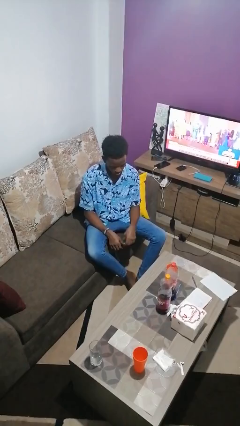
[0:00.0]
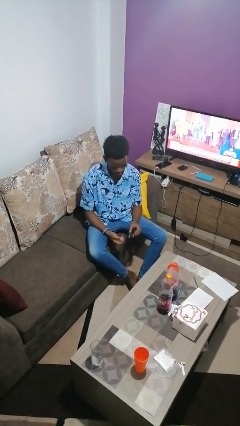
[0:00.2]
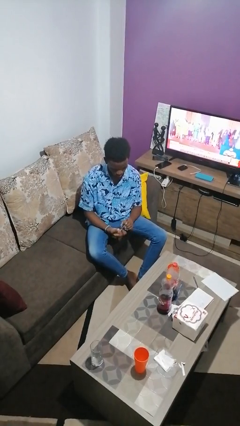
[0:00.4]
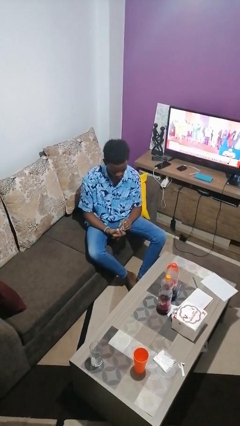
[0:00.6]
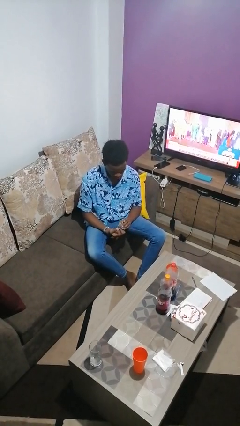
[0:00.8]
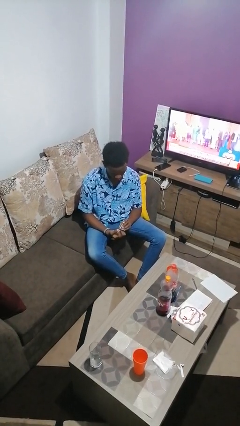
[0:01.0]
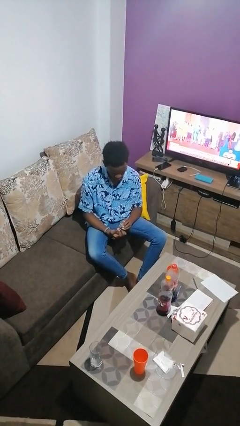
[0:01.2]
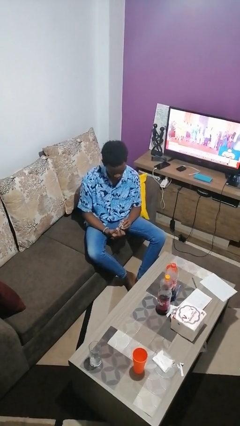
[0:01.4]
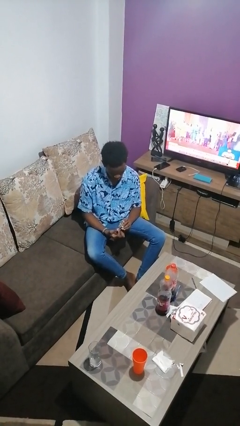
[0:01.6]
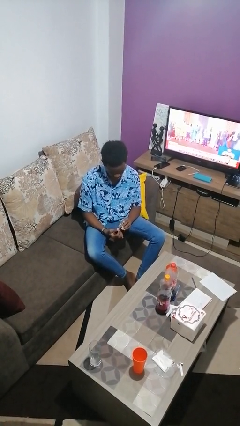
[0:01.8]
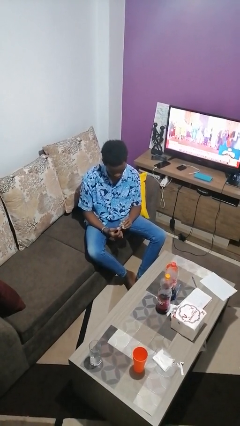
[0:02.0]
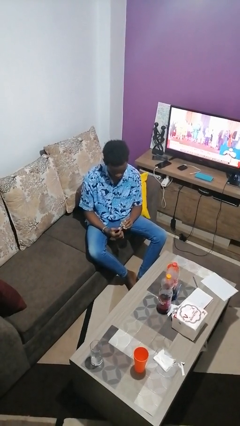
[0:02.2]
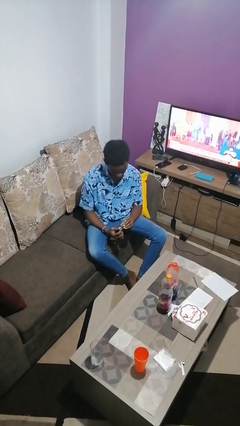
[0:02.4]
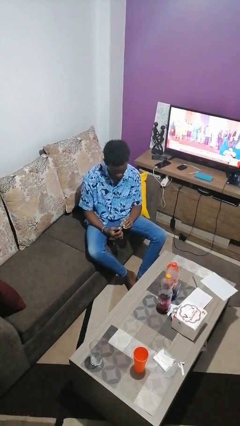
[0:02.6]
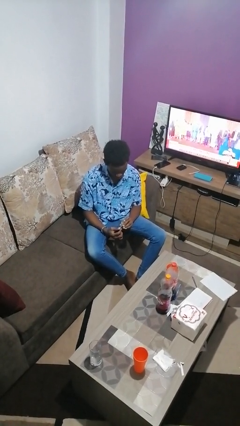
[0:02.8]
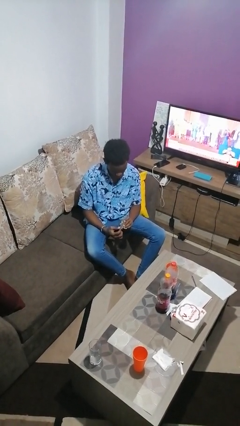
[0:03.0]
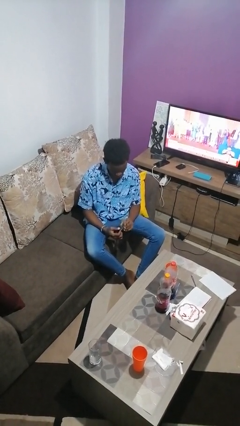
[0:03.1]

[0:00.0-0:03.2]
person clips fingernails

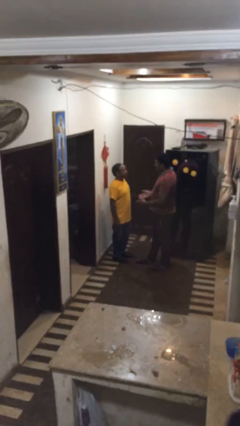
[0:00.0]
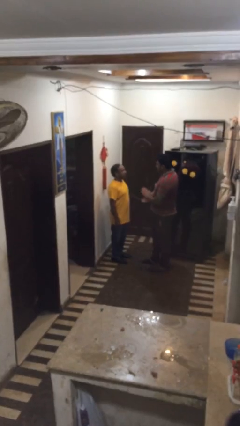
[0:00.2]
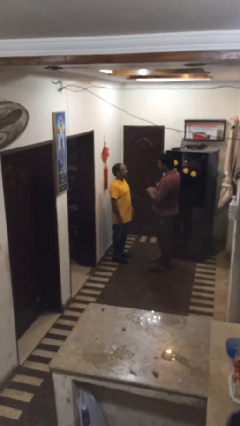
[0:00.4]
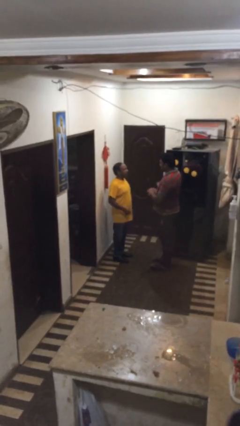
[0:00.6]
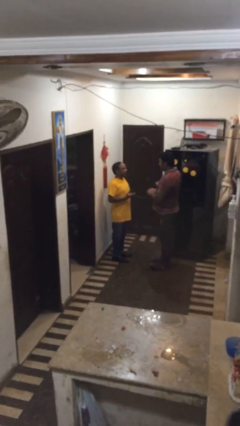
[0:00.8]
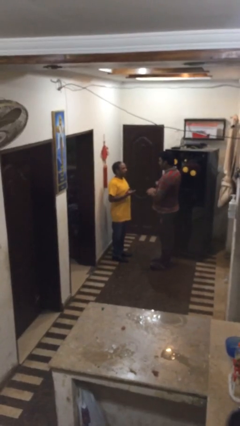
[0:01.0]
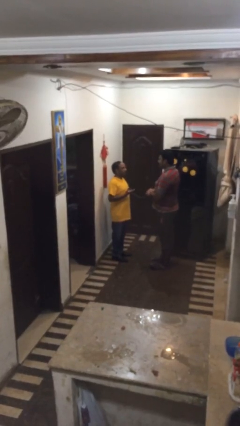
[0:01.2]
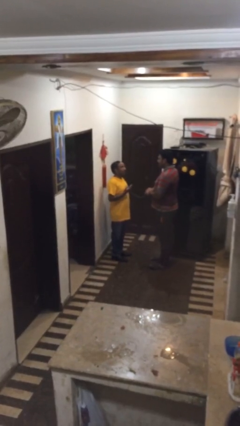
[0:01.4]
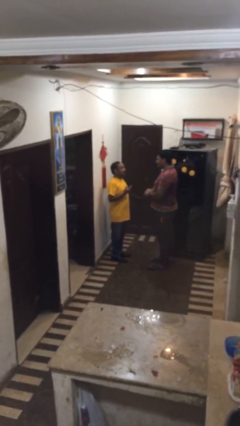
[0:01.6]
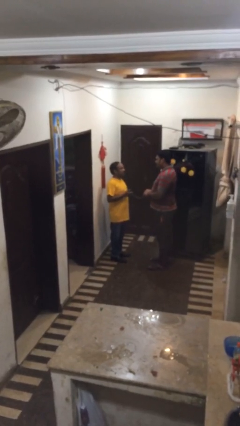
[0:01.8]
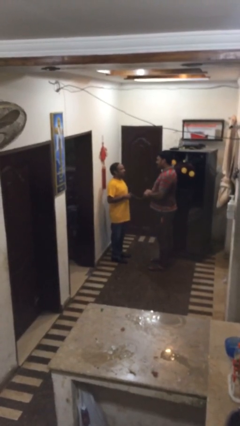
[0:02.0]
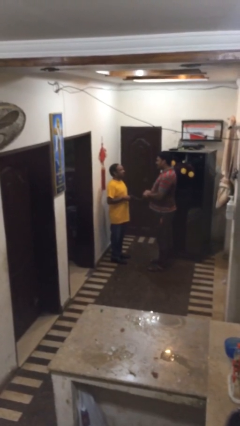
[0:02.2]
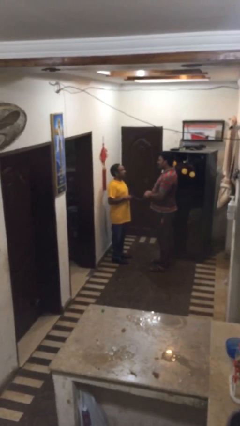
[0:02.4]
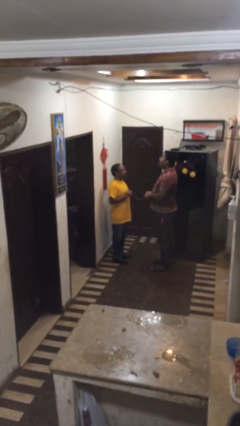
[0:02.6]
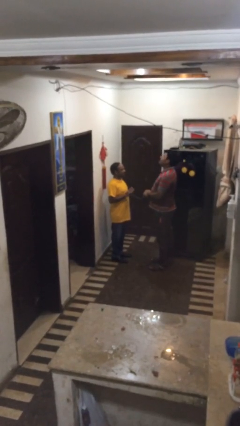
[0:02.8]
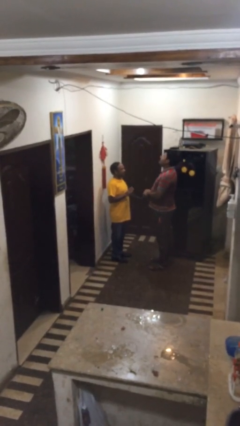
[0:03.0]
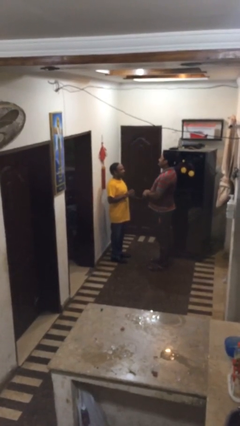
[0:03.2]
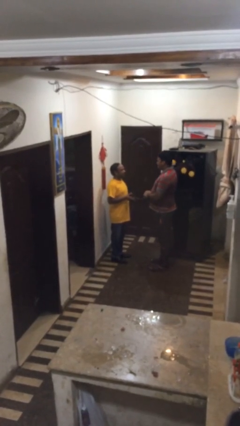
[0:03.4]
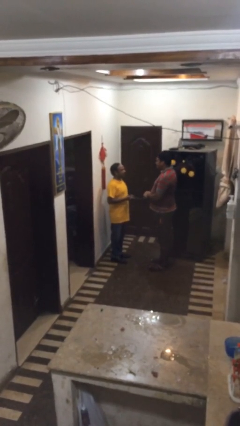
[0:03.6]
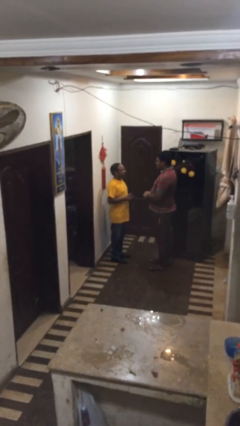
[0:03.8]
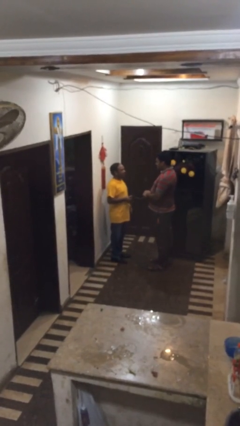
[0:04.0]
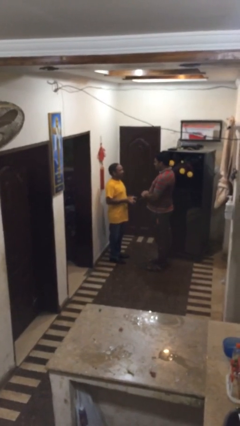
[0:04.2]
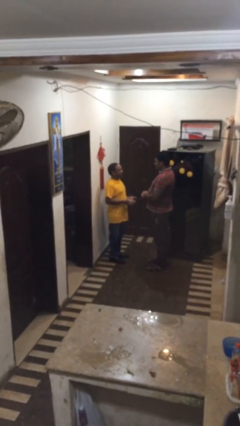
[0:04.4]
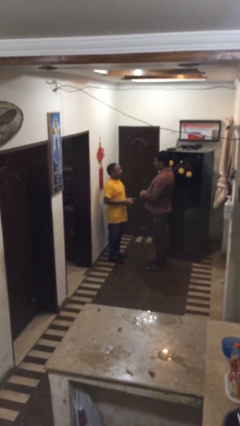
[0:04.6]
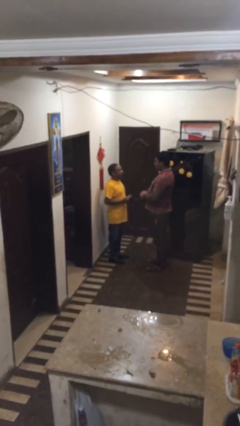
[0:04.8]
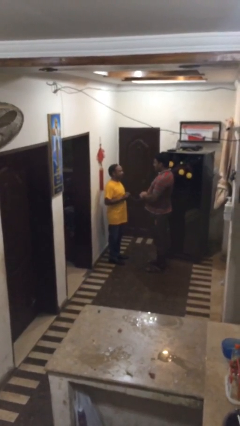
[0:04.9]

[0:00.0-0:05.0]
person talks to person

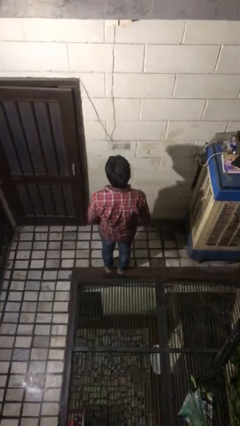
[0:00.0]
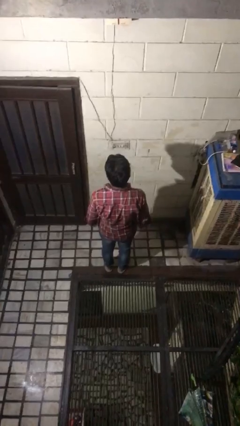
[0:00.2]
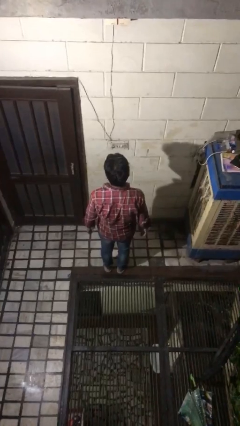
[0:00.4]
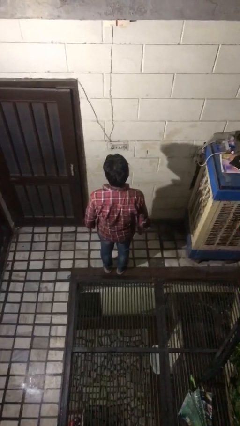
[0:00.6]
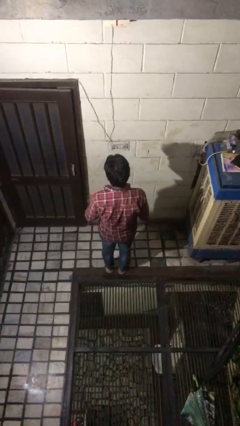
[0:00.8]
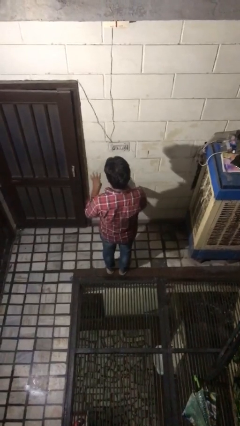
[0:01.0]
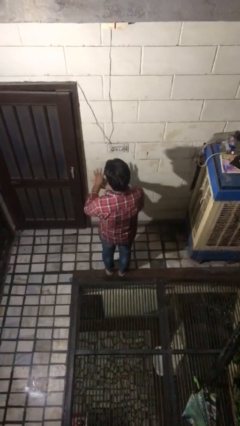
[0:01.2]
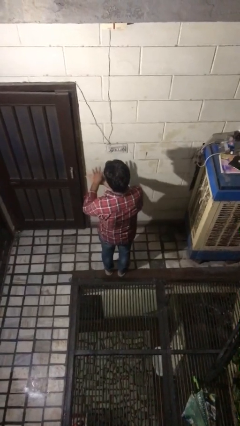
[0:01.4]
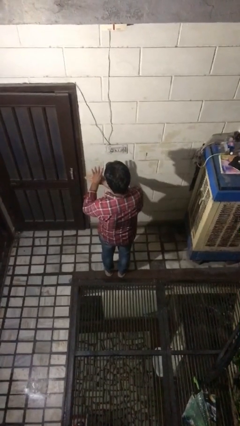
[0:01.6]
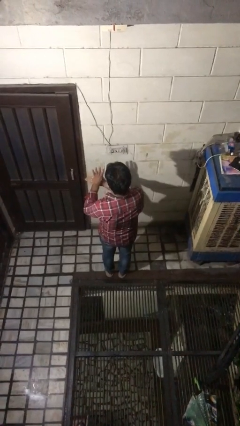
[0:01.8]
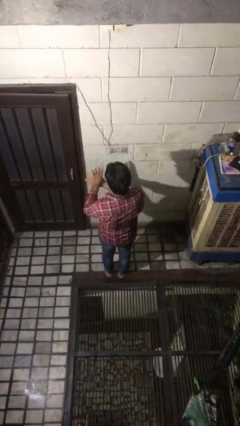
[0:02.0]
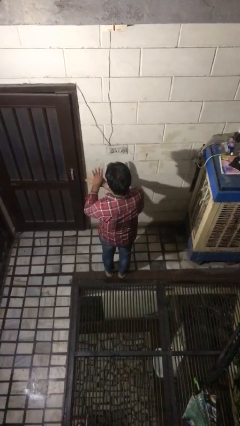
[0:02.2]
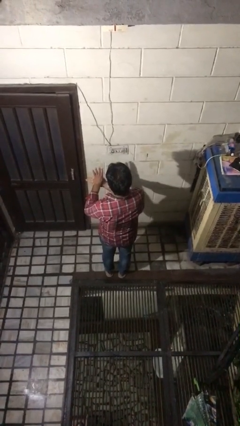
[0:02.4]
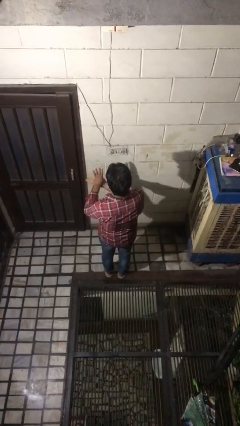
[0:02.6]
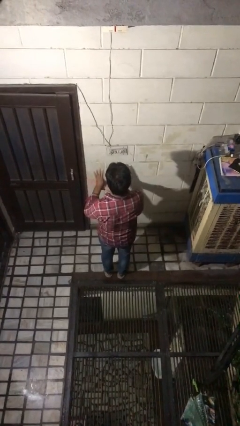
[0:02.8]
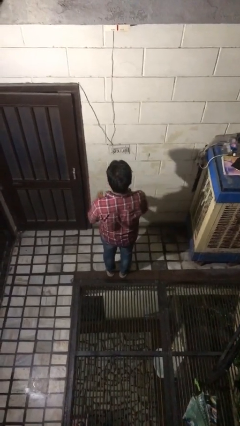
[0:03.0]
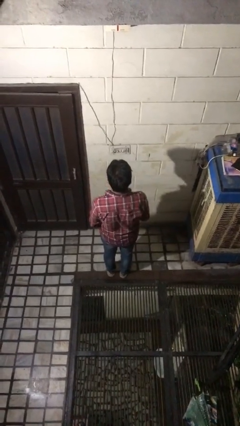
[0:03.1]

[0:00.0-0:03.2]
person gestures number four

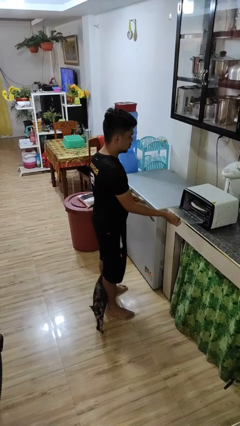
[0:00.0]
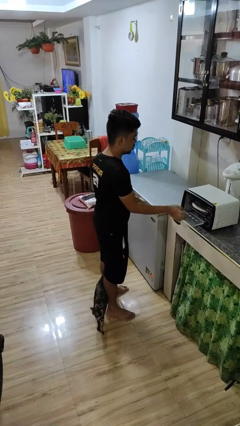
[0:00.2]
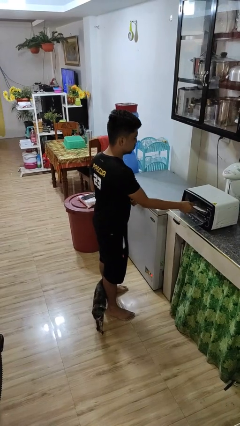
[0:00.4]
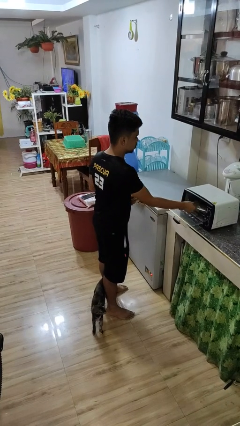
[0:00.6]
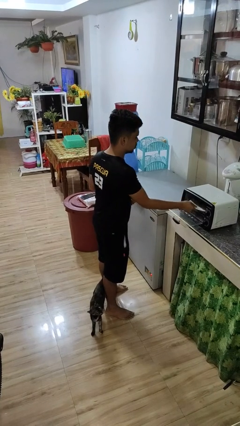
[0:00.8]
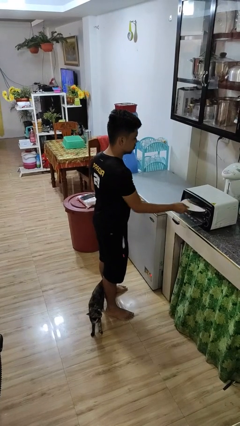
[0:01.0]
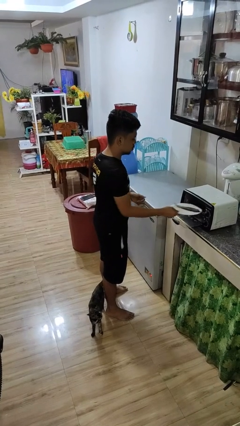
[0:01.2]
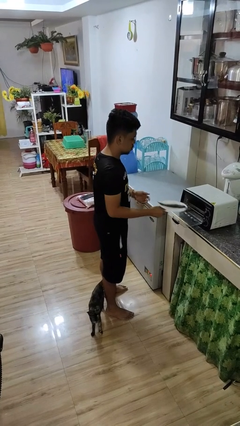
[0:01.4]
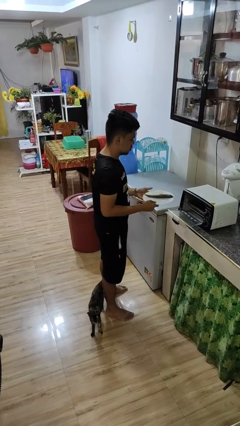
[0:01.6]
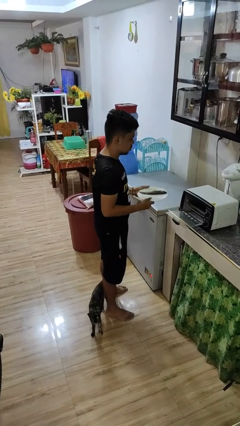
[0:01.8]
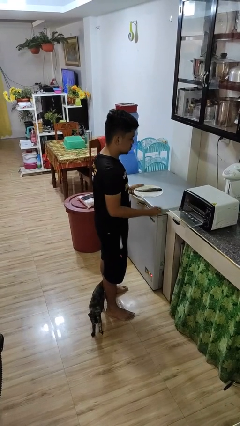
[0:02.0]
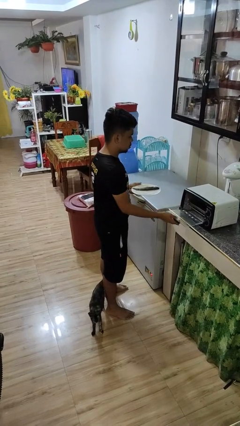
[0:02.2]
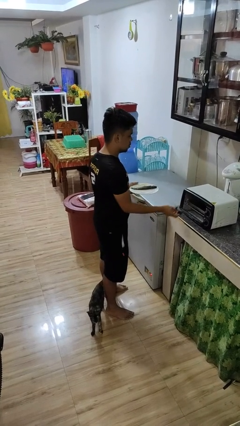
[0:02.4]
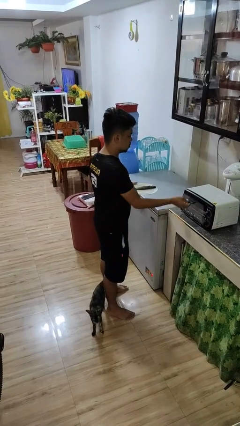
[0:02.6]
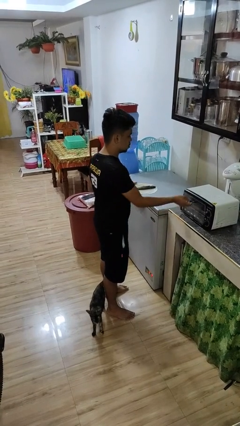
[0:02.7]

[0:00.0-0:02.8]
person takes object from microwave

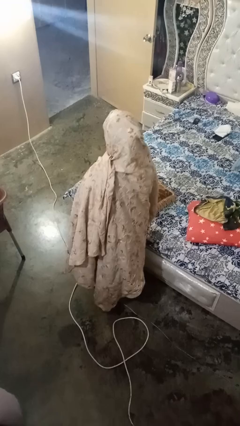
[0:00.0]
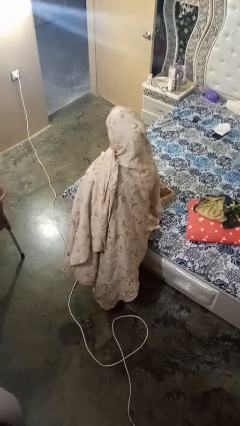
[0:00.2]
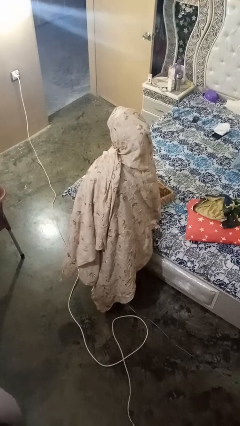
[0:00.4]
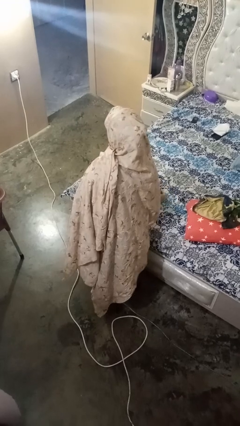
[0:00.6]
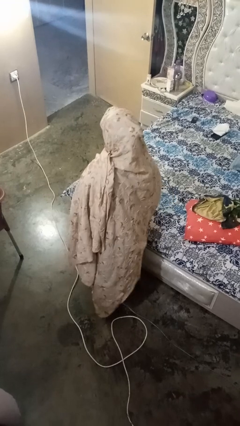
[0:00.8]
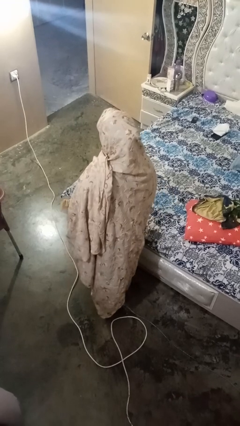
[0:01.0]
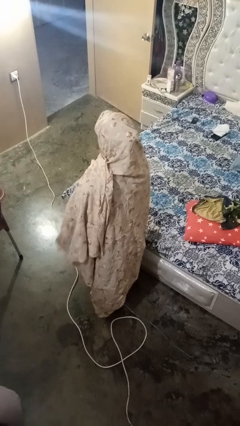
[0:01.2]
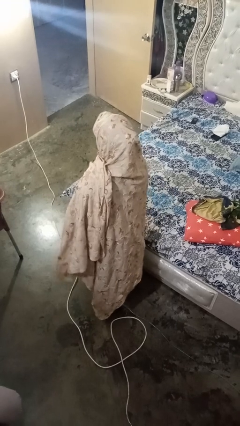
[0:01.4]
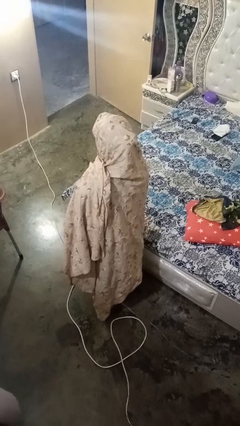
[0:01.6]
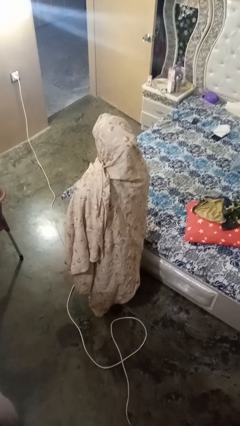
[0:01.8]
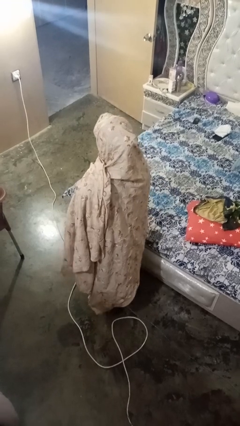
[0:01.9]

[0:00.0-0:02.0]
person picks up object from bed

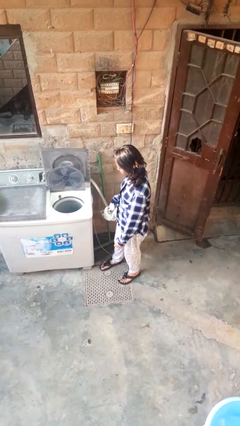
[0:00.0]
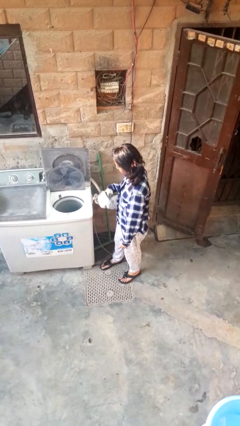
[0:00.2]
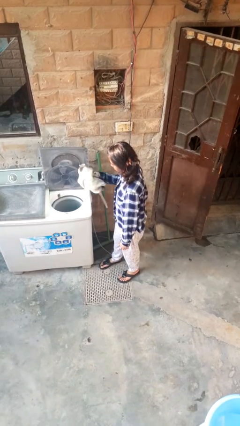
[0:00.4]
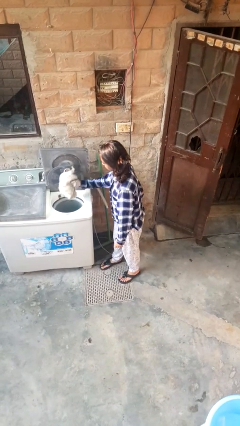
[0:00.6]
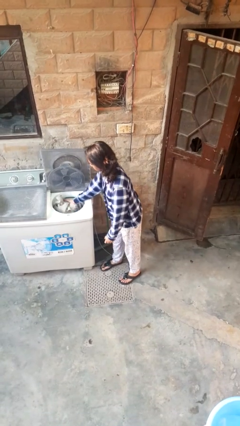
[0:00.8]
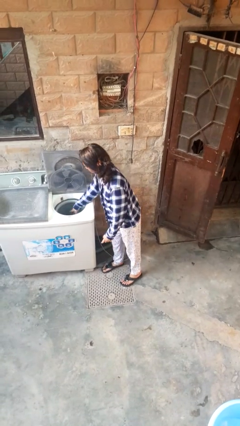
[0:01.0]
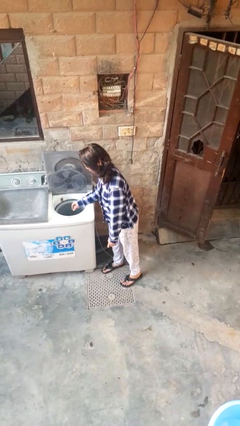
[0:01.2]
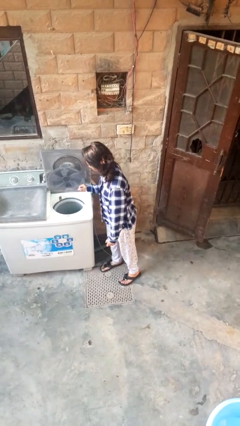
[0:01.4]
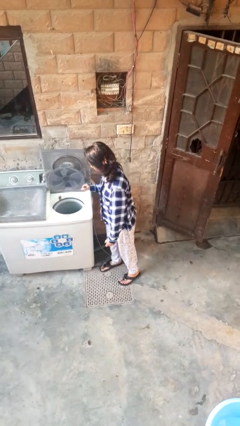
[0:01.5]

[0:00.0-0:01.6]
person loads dryer
